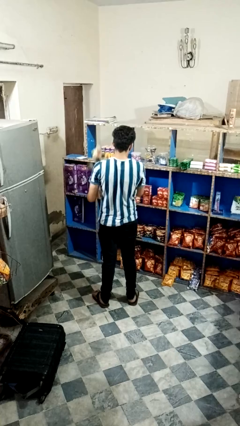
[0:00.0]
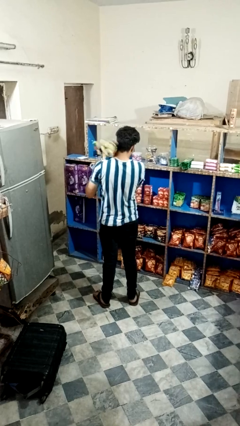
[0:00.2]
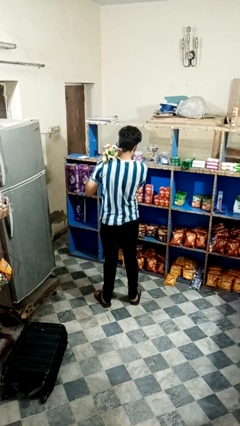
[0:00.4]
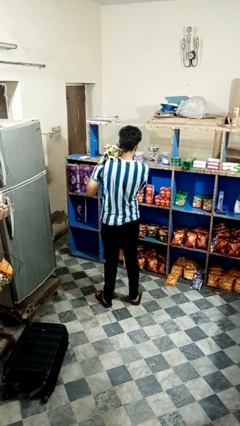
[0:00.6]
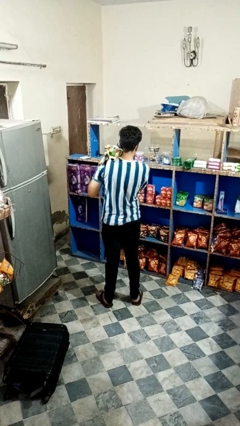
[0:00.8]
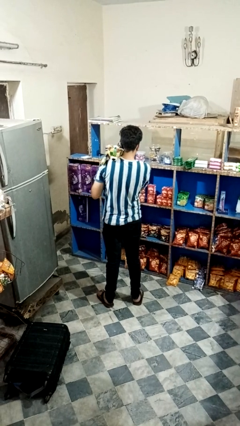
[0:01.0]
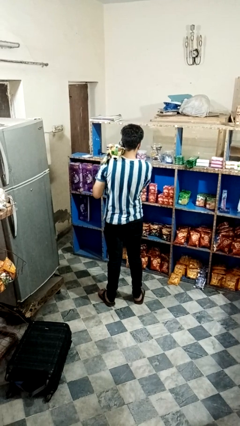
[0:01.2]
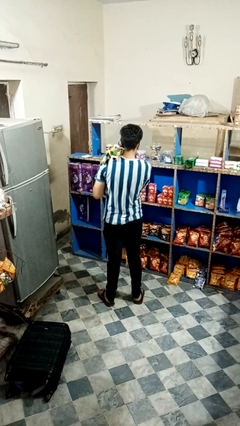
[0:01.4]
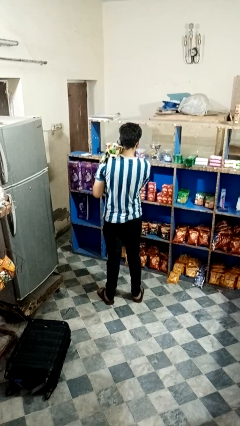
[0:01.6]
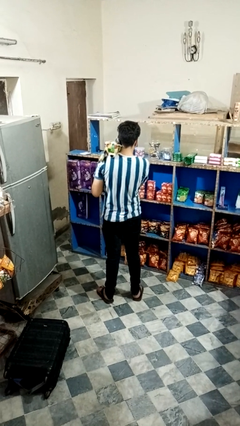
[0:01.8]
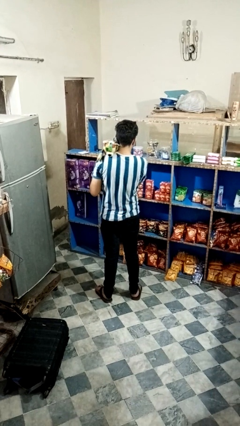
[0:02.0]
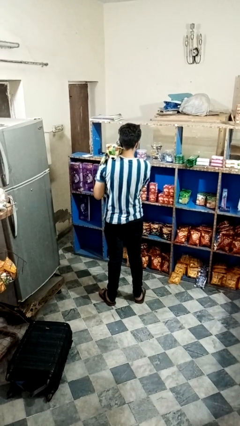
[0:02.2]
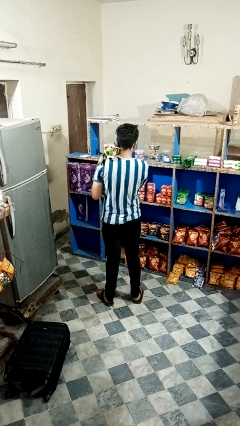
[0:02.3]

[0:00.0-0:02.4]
person hugs stuffed animal

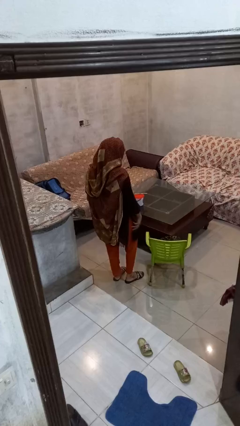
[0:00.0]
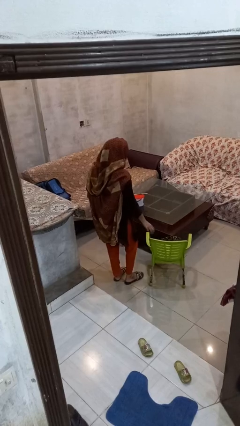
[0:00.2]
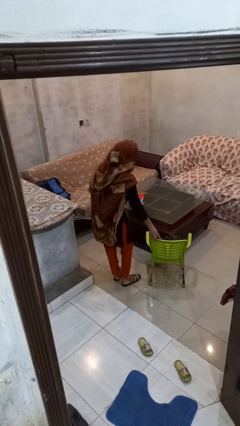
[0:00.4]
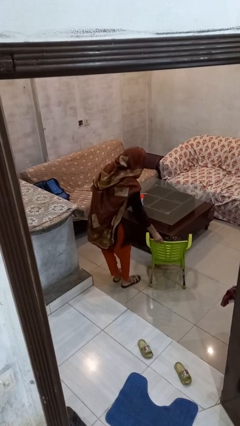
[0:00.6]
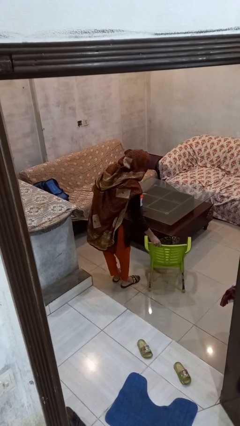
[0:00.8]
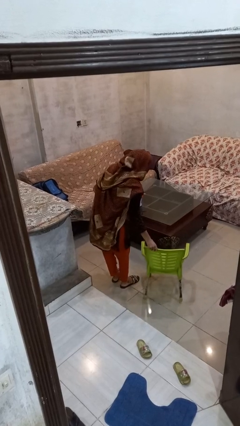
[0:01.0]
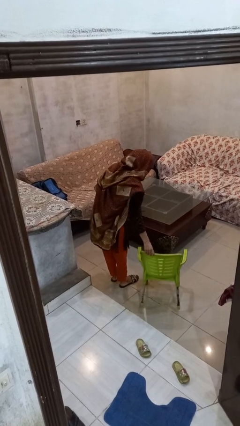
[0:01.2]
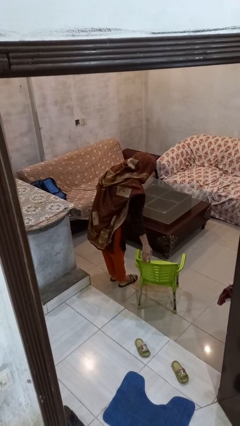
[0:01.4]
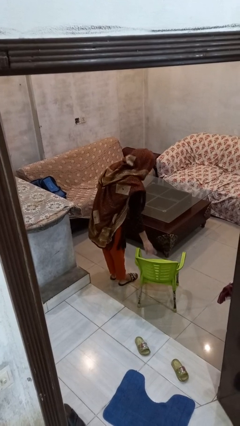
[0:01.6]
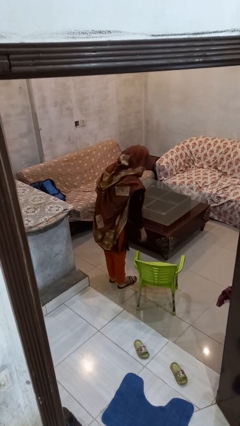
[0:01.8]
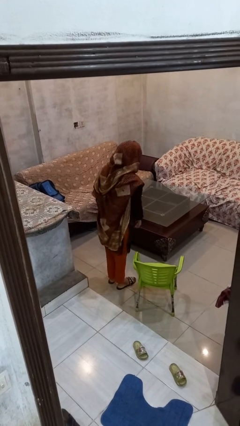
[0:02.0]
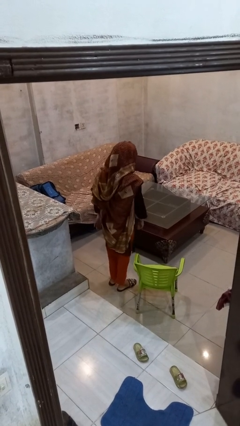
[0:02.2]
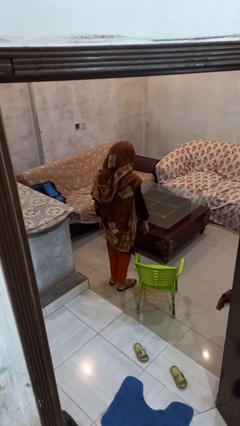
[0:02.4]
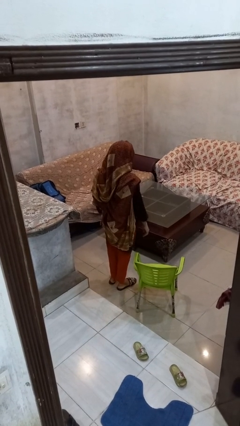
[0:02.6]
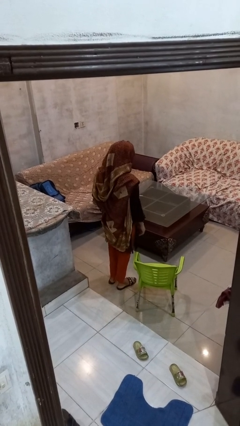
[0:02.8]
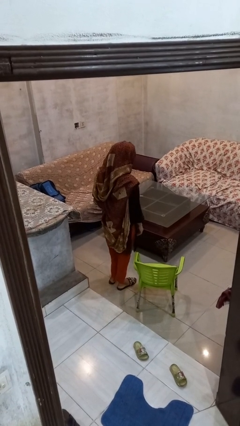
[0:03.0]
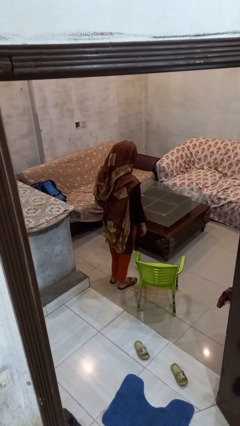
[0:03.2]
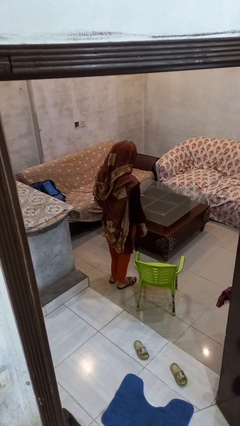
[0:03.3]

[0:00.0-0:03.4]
person pulls out chair

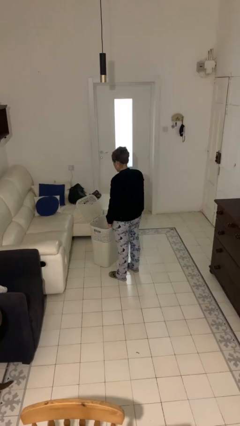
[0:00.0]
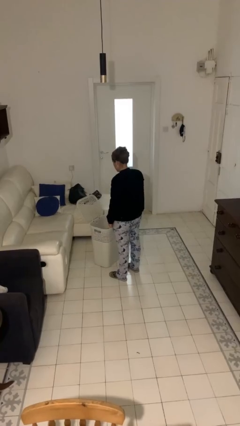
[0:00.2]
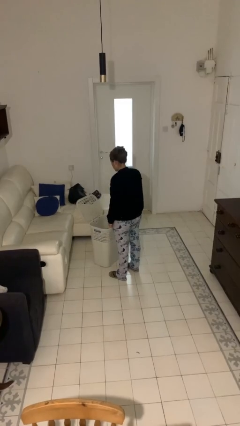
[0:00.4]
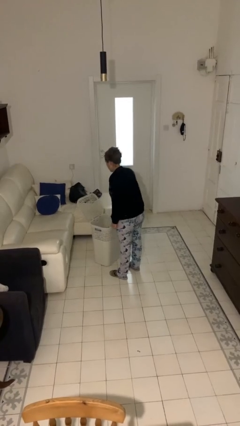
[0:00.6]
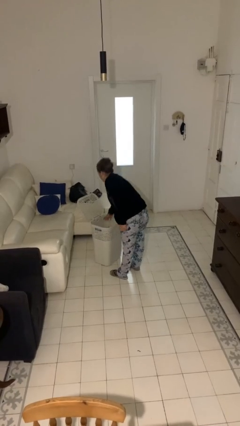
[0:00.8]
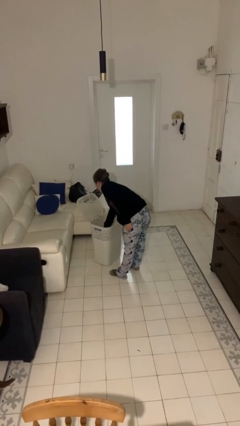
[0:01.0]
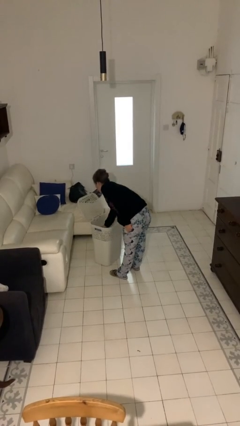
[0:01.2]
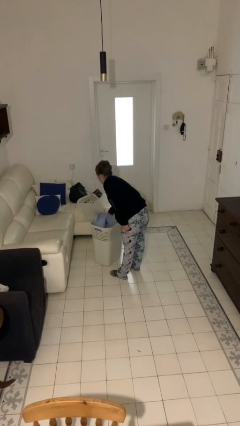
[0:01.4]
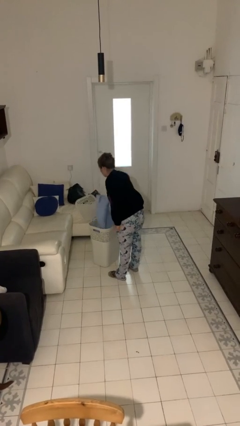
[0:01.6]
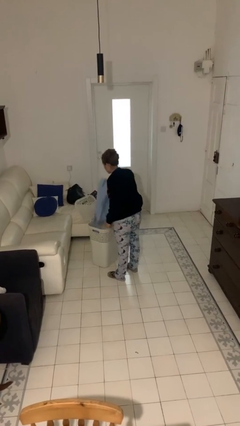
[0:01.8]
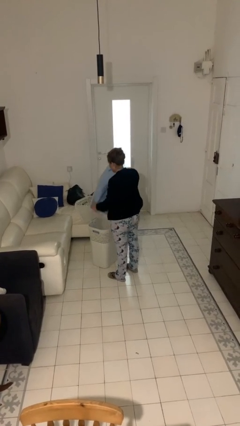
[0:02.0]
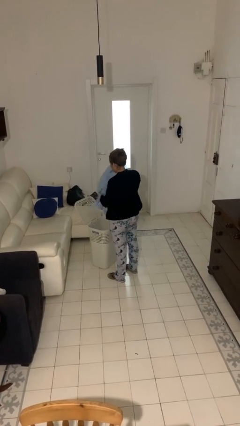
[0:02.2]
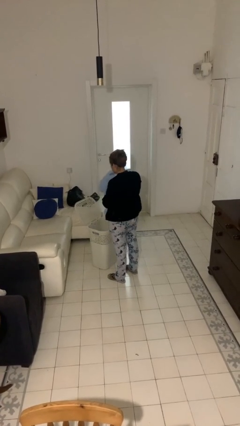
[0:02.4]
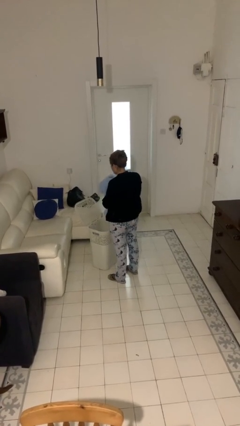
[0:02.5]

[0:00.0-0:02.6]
person takes object from basket

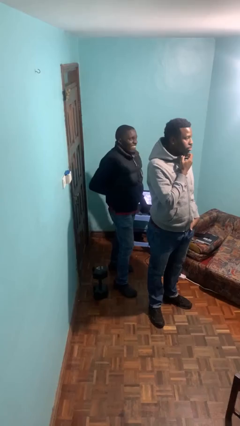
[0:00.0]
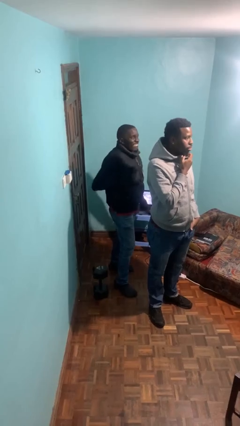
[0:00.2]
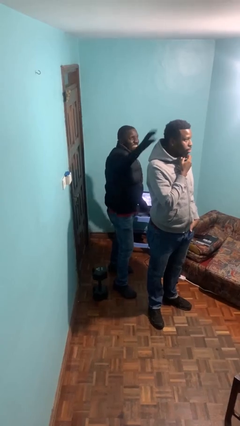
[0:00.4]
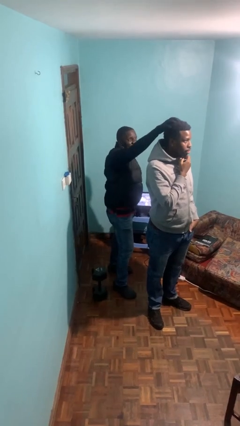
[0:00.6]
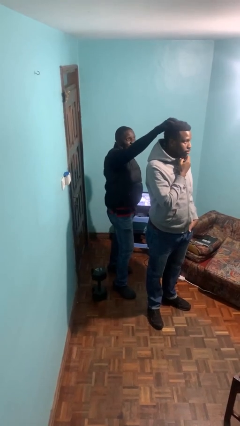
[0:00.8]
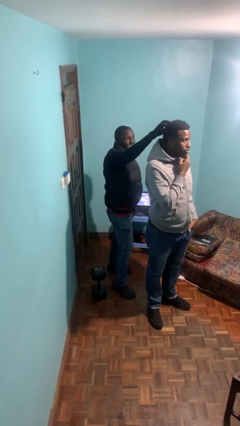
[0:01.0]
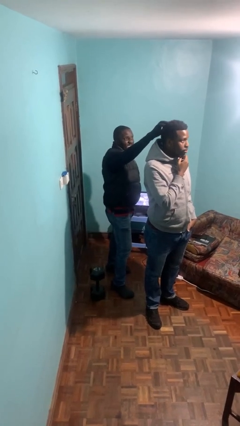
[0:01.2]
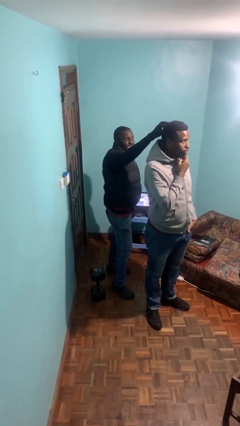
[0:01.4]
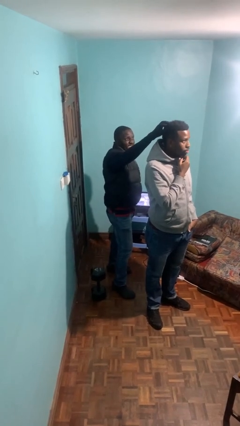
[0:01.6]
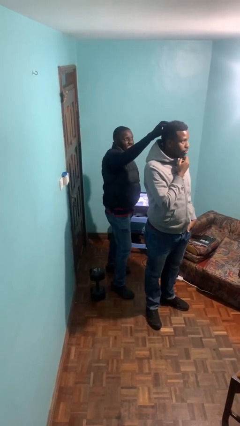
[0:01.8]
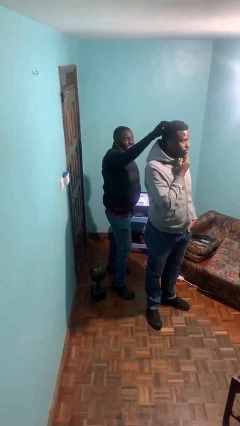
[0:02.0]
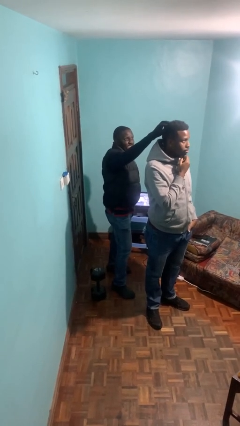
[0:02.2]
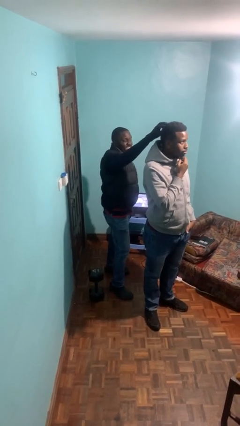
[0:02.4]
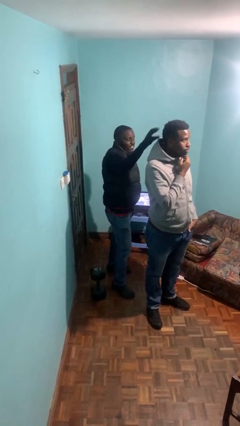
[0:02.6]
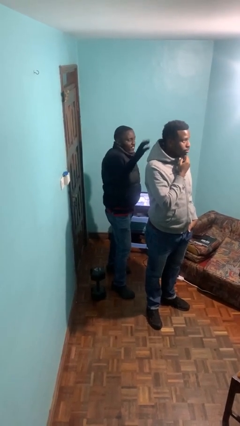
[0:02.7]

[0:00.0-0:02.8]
person grabs person by hair

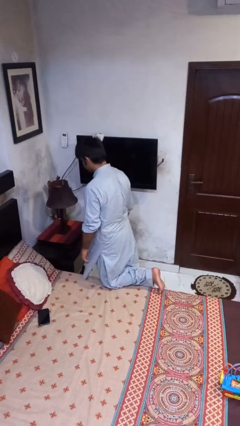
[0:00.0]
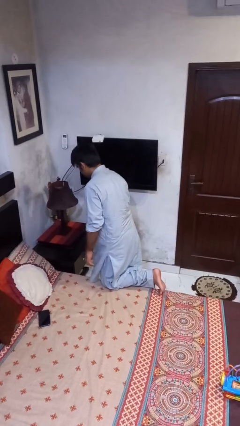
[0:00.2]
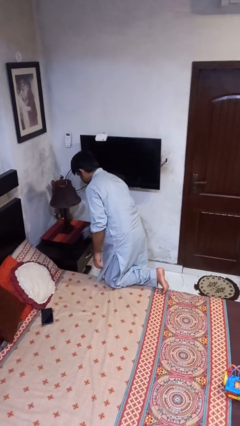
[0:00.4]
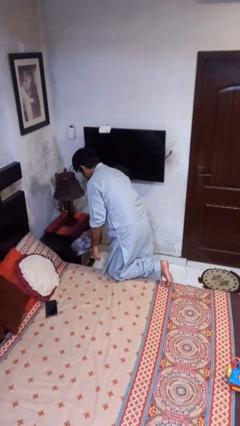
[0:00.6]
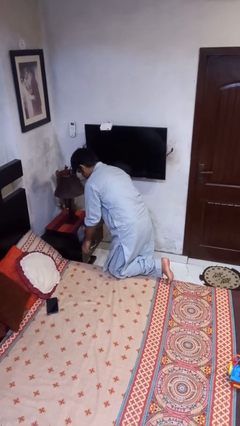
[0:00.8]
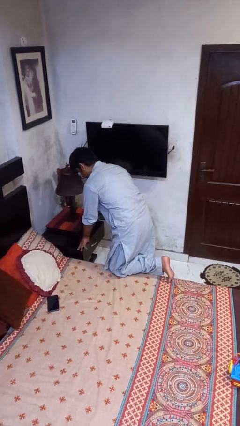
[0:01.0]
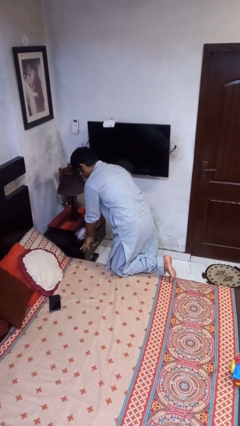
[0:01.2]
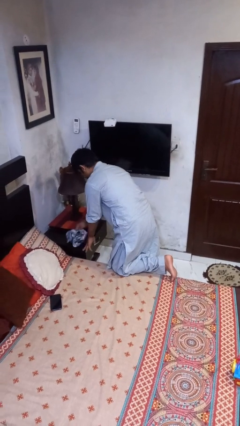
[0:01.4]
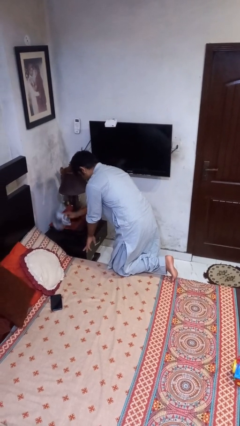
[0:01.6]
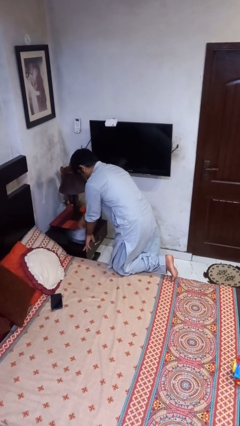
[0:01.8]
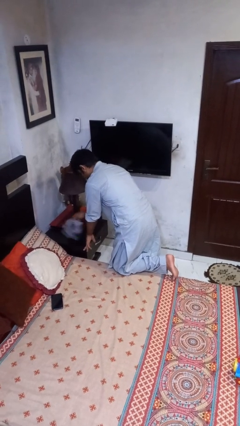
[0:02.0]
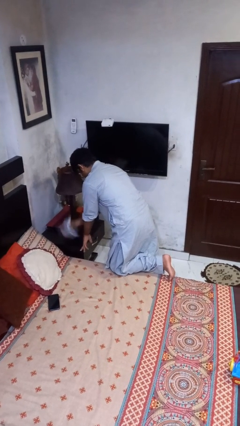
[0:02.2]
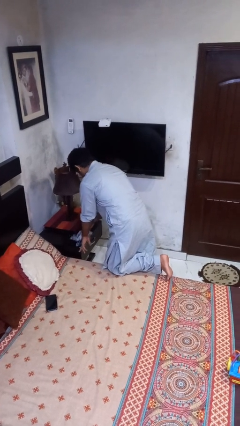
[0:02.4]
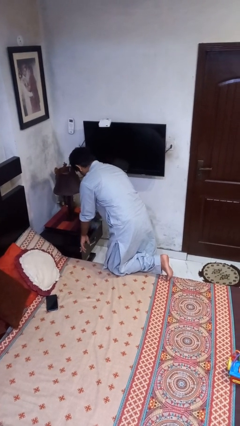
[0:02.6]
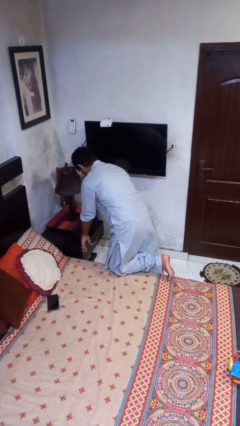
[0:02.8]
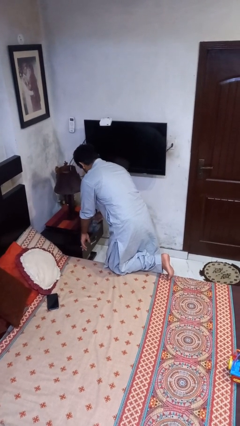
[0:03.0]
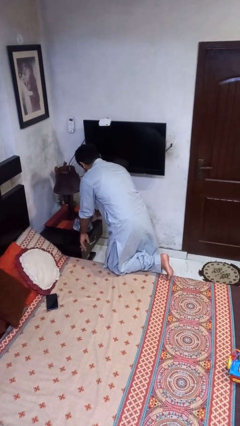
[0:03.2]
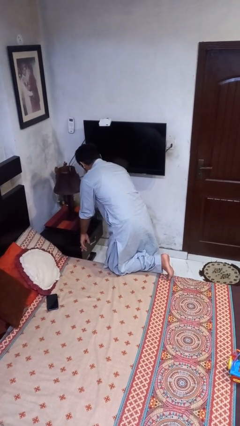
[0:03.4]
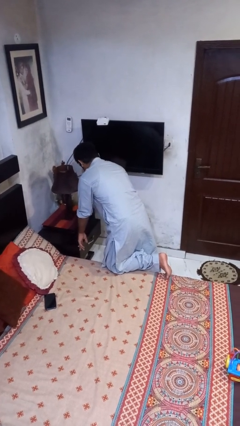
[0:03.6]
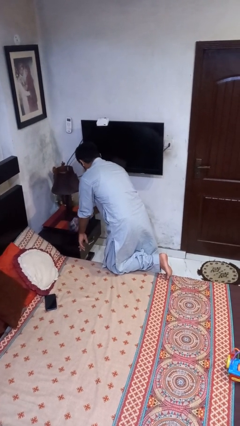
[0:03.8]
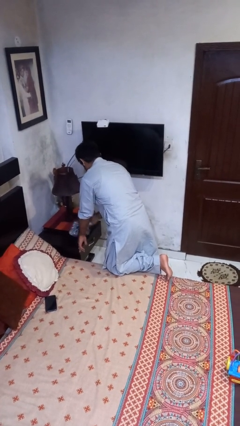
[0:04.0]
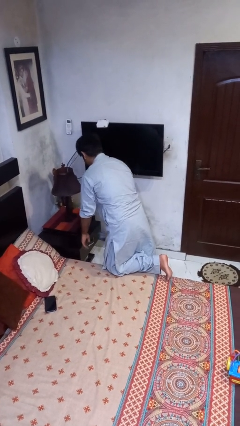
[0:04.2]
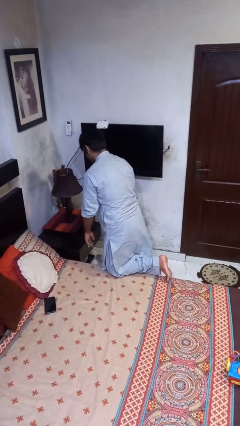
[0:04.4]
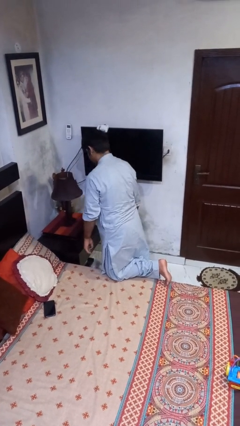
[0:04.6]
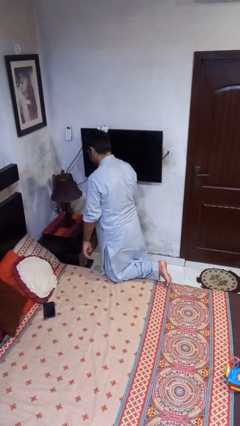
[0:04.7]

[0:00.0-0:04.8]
person cleans table with rag

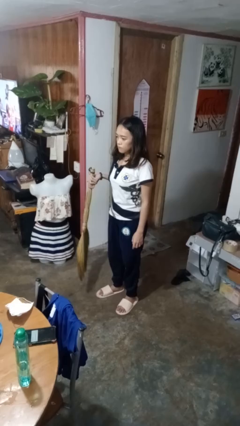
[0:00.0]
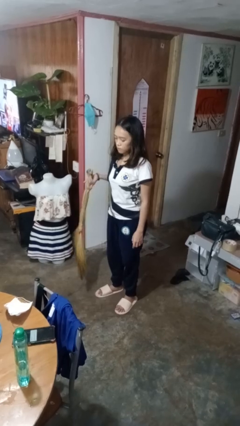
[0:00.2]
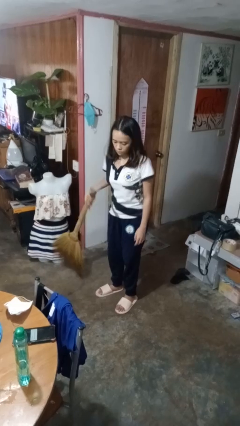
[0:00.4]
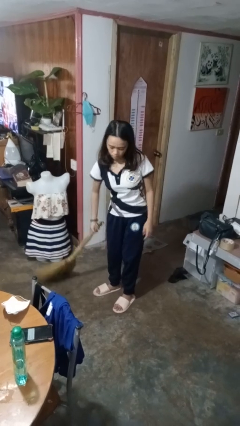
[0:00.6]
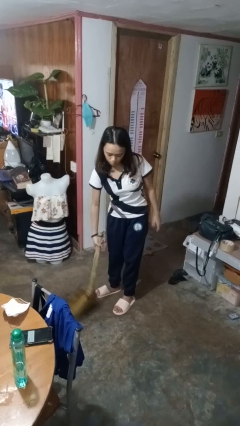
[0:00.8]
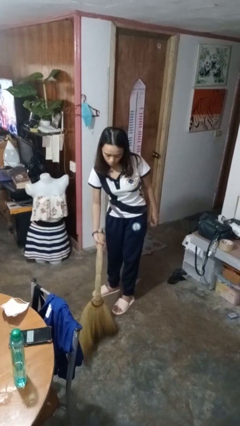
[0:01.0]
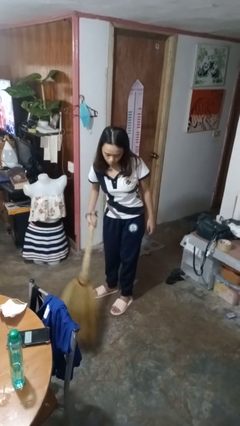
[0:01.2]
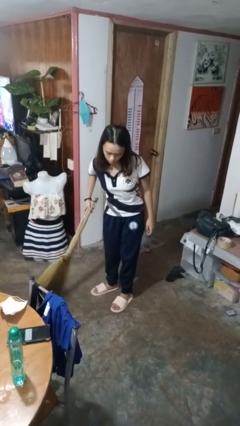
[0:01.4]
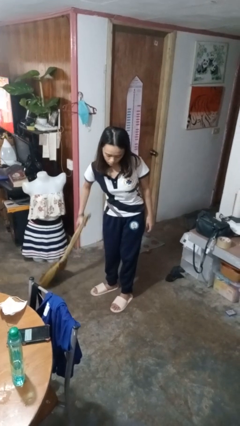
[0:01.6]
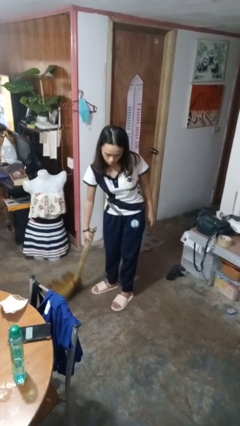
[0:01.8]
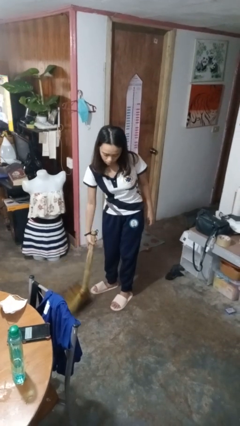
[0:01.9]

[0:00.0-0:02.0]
person sweeps floor
